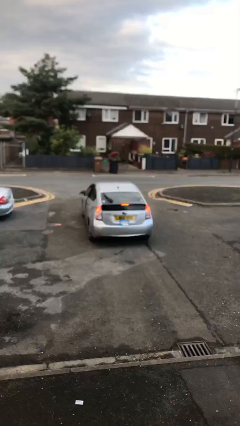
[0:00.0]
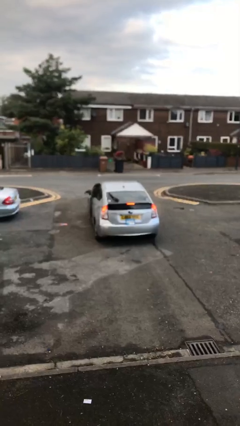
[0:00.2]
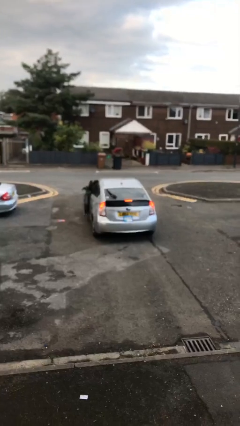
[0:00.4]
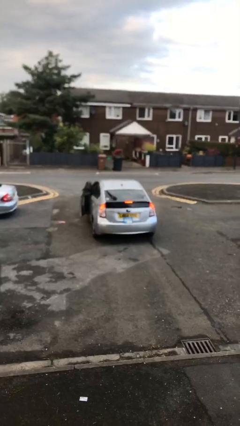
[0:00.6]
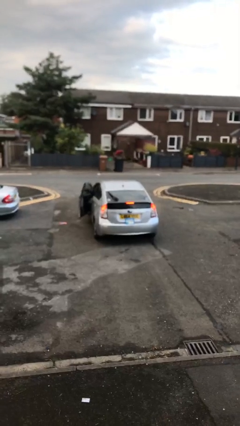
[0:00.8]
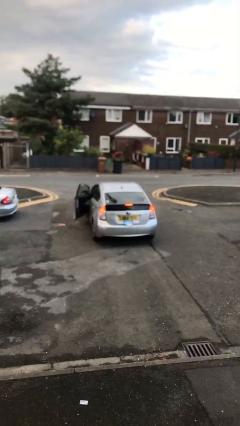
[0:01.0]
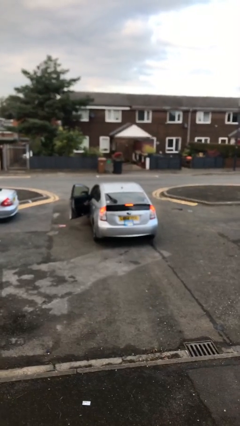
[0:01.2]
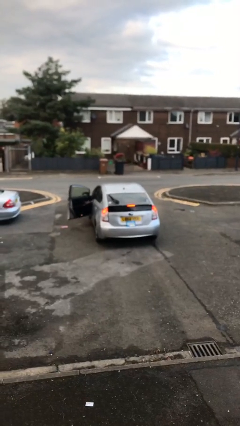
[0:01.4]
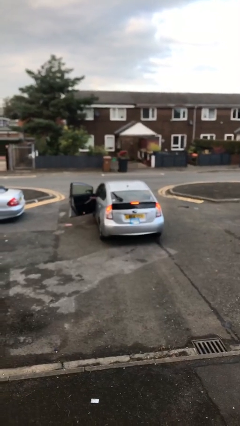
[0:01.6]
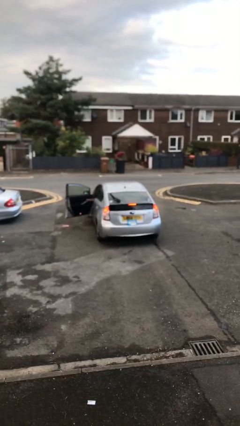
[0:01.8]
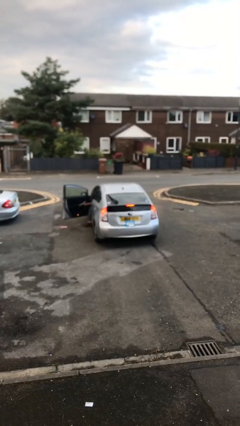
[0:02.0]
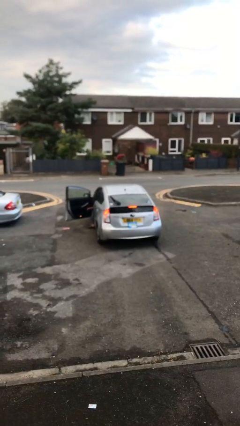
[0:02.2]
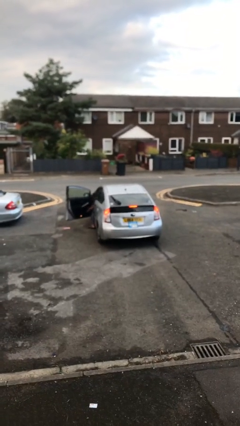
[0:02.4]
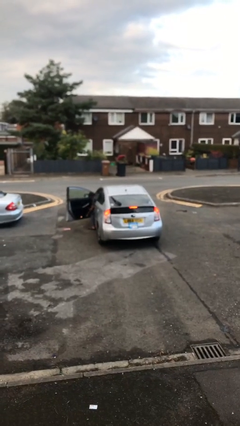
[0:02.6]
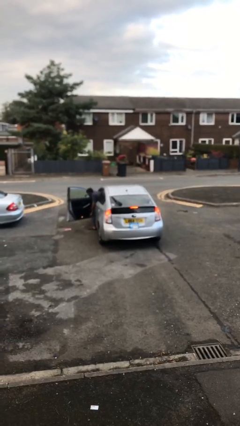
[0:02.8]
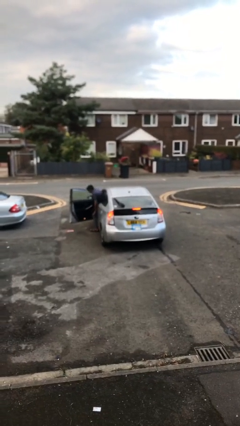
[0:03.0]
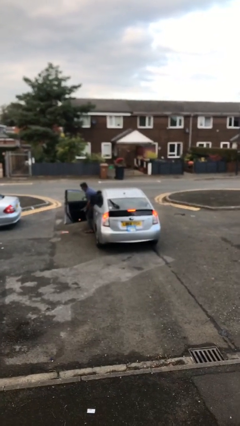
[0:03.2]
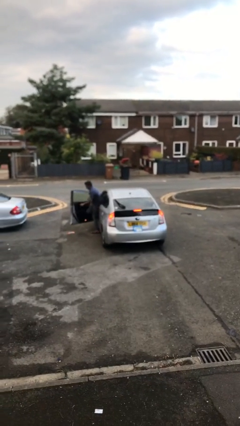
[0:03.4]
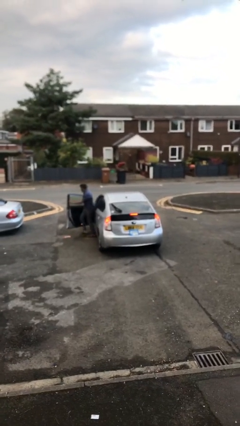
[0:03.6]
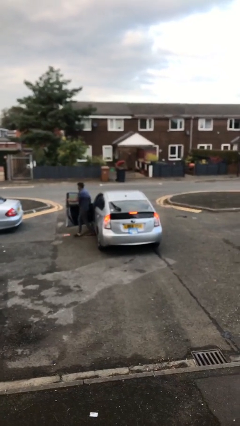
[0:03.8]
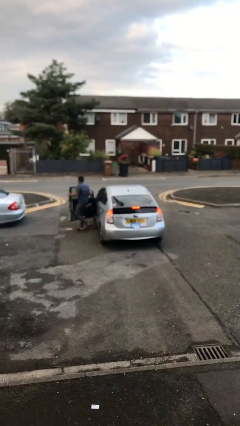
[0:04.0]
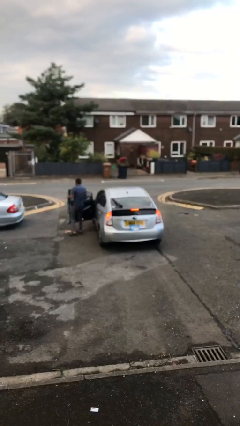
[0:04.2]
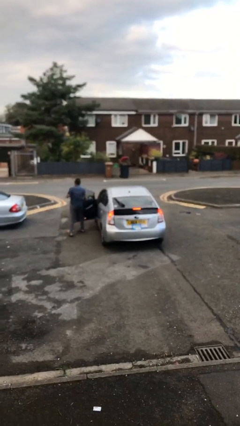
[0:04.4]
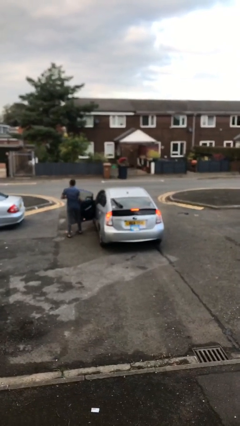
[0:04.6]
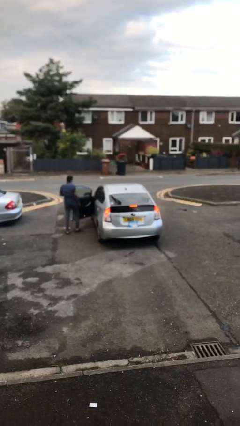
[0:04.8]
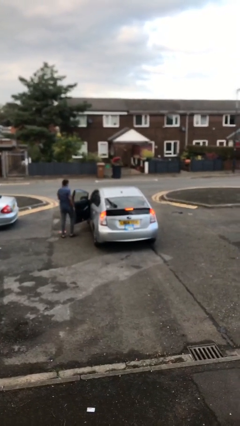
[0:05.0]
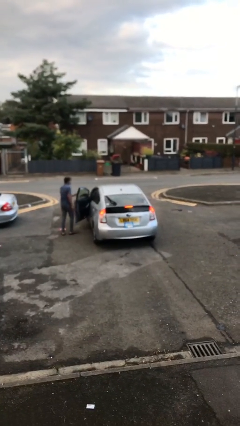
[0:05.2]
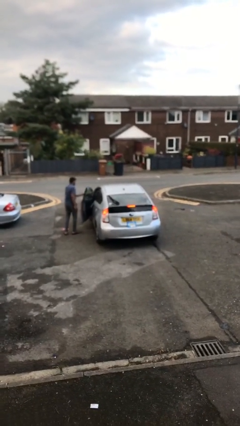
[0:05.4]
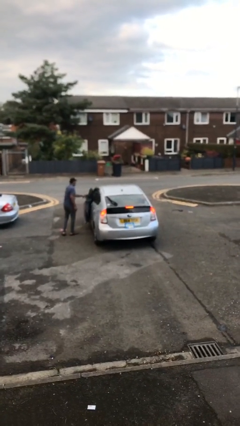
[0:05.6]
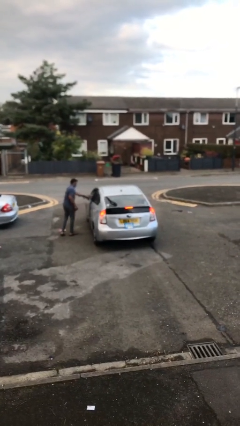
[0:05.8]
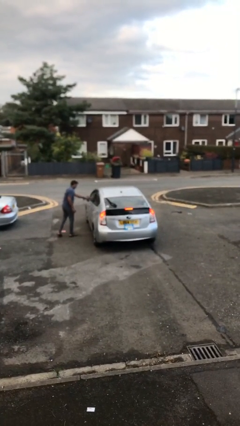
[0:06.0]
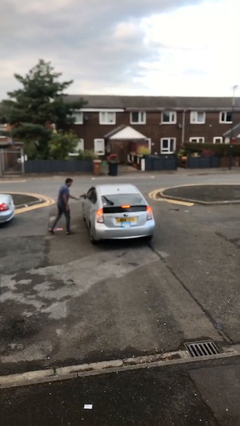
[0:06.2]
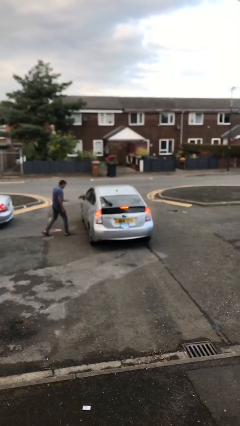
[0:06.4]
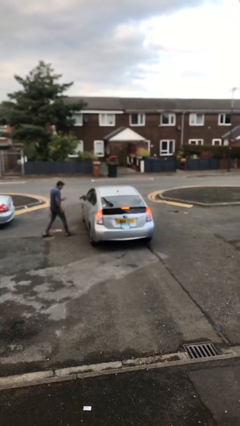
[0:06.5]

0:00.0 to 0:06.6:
car drops off person

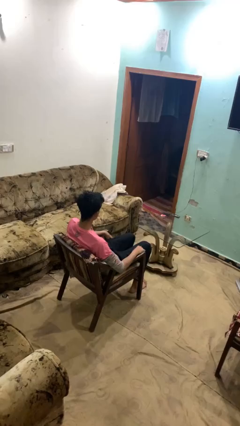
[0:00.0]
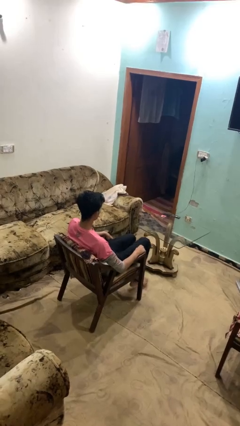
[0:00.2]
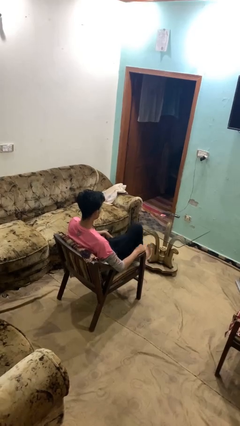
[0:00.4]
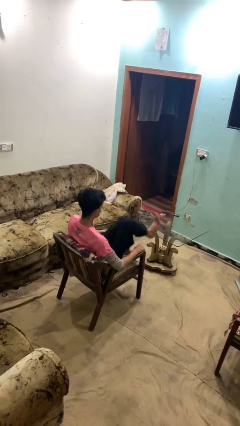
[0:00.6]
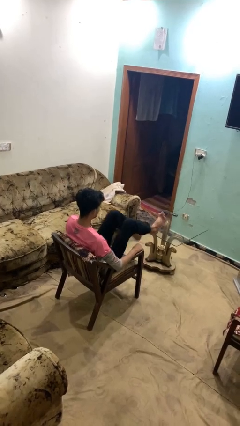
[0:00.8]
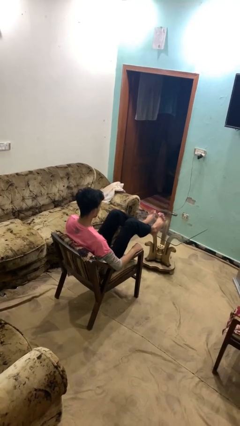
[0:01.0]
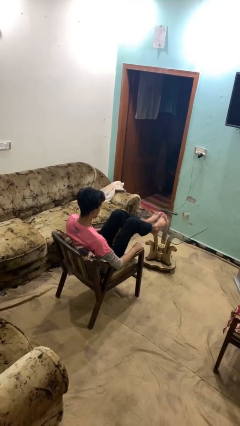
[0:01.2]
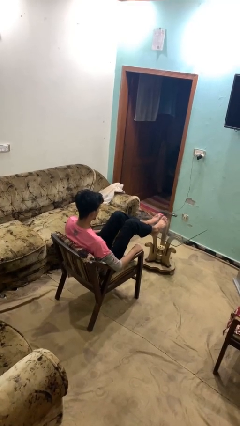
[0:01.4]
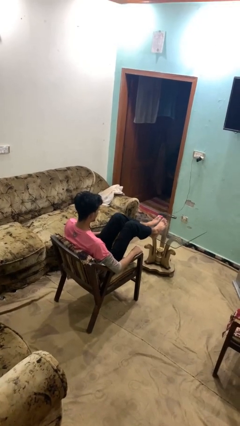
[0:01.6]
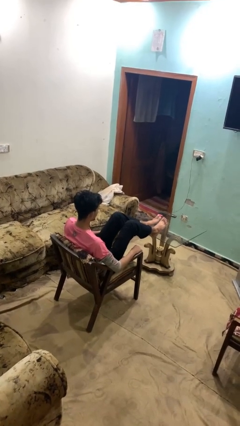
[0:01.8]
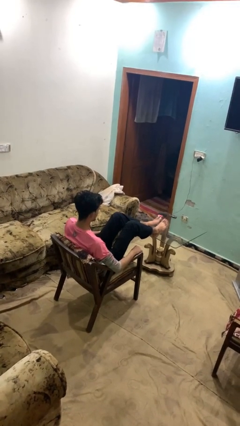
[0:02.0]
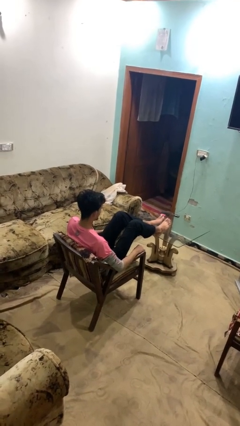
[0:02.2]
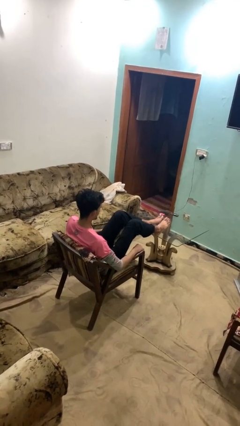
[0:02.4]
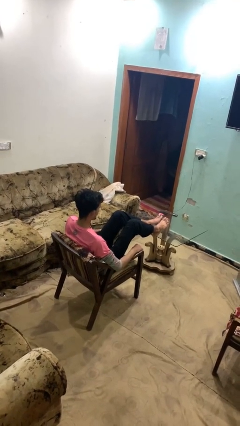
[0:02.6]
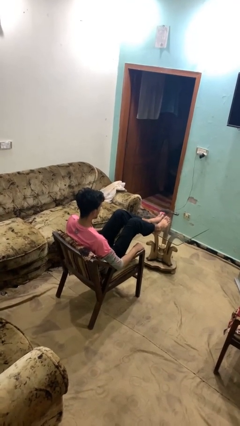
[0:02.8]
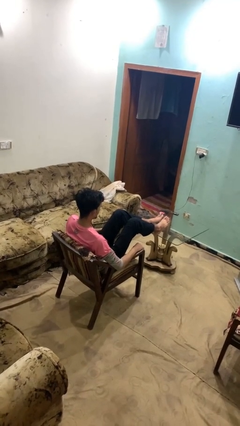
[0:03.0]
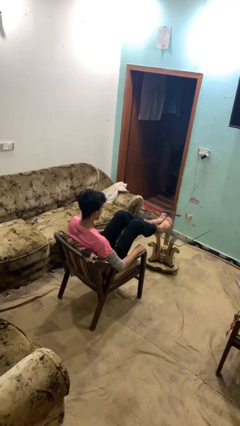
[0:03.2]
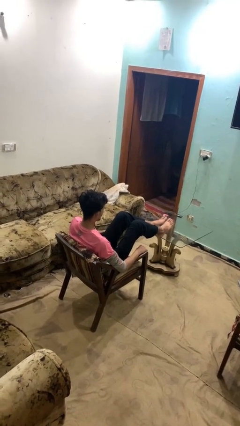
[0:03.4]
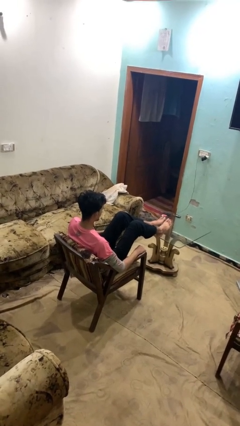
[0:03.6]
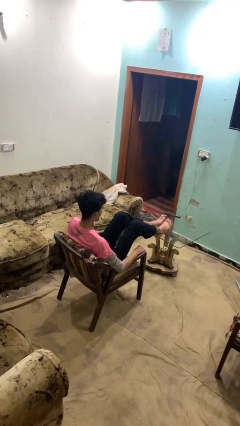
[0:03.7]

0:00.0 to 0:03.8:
person puts feet up

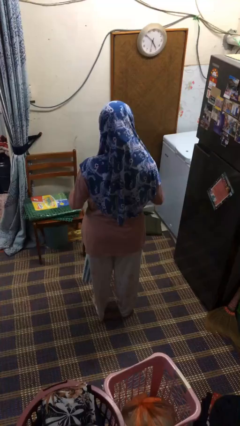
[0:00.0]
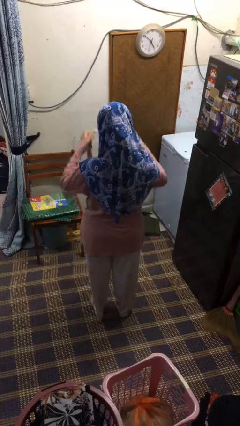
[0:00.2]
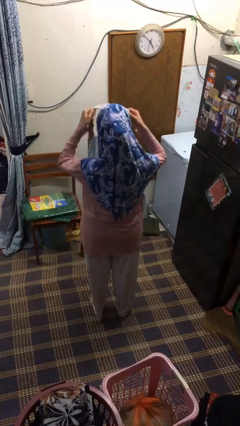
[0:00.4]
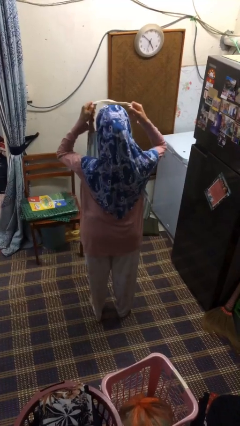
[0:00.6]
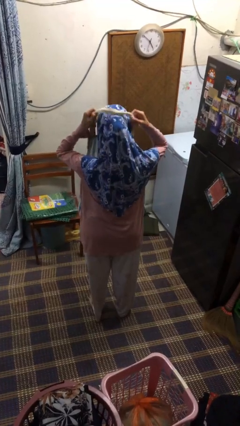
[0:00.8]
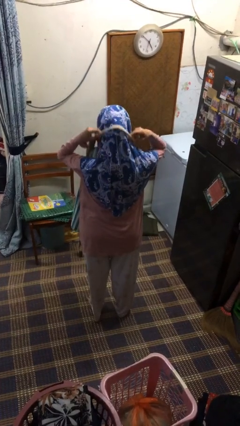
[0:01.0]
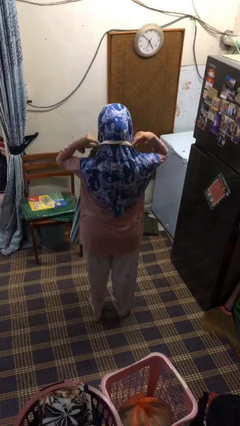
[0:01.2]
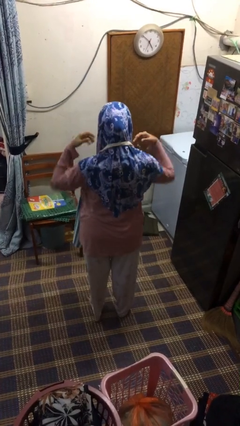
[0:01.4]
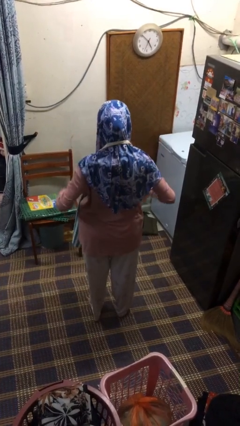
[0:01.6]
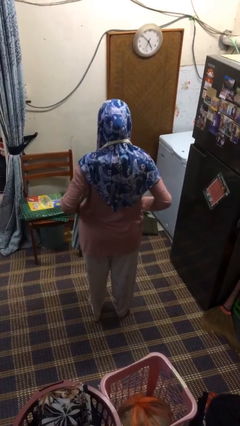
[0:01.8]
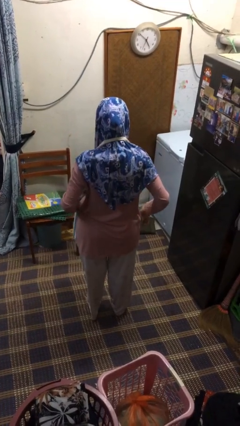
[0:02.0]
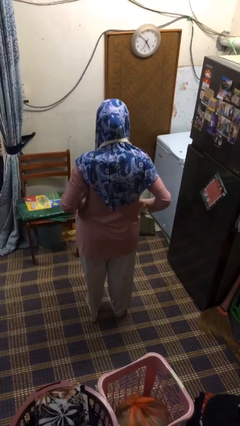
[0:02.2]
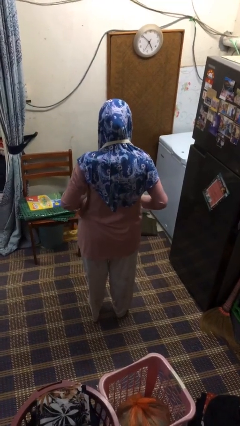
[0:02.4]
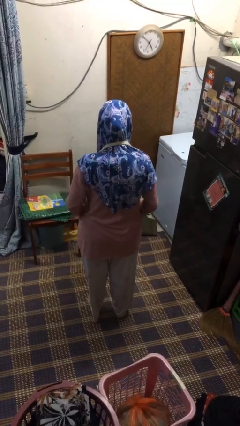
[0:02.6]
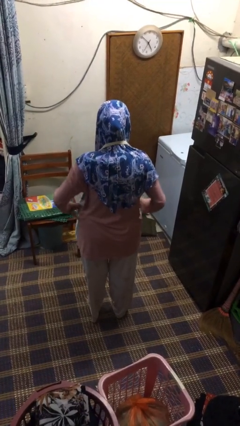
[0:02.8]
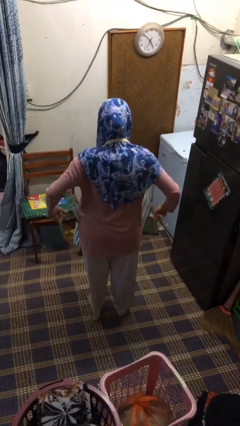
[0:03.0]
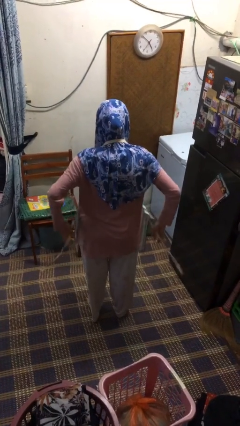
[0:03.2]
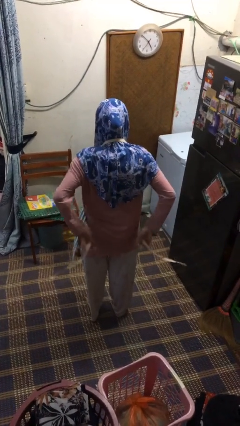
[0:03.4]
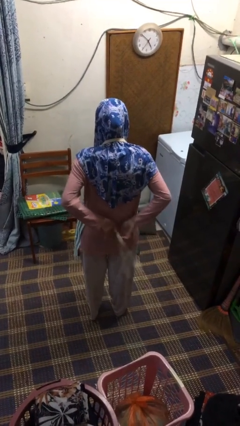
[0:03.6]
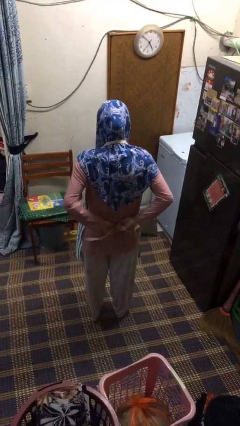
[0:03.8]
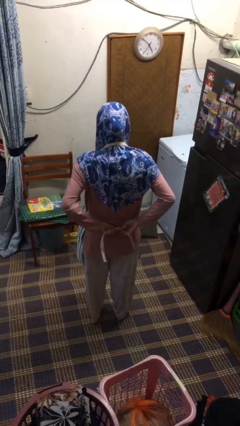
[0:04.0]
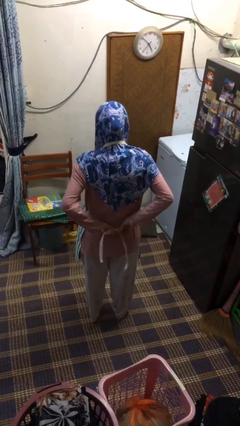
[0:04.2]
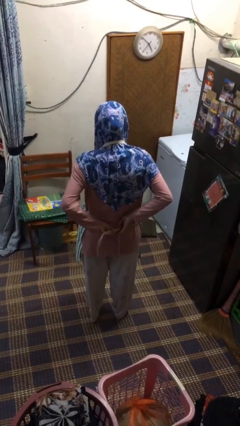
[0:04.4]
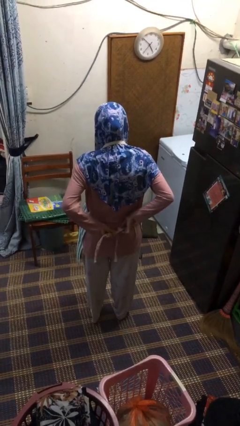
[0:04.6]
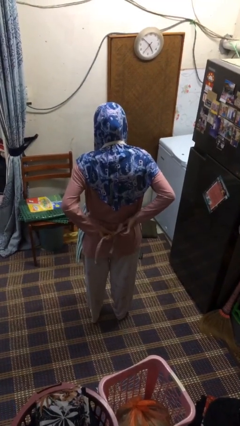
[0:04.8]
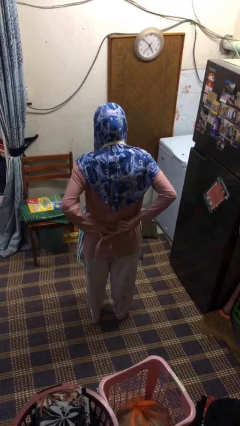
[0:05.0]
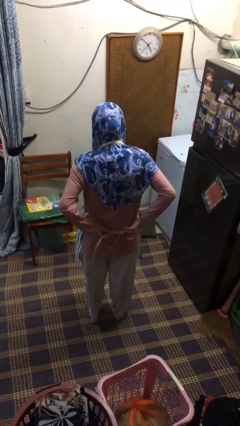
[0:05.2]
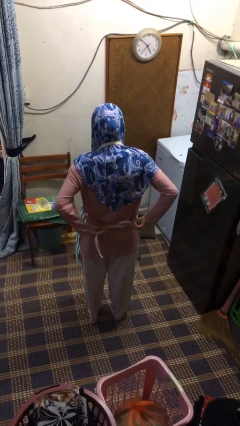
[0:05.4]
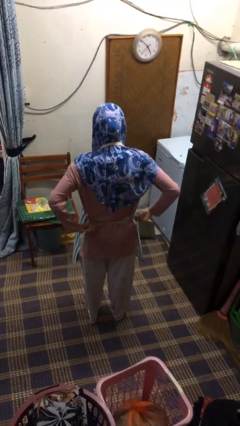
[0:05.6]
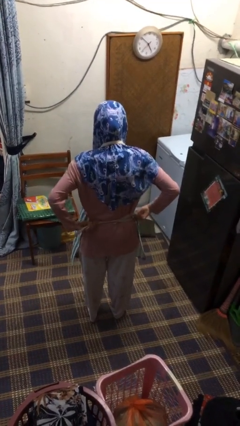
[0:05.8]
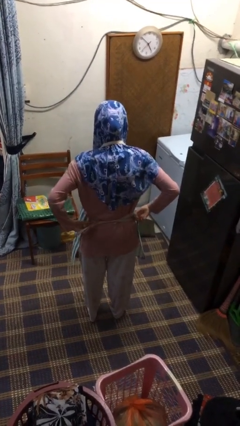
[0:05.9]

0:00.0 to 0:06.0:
person puts on apron

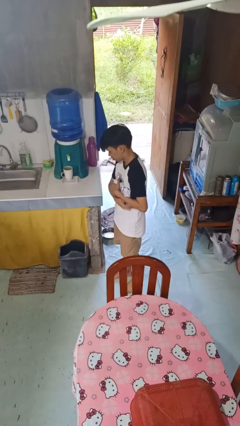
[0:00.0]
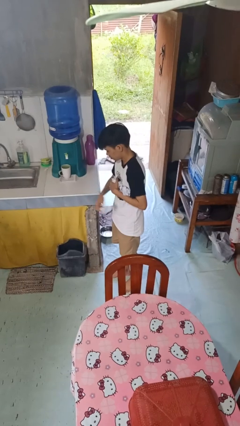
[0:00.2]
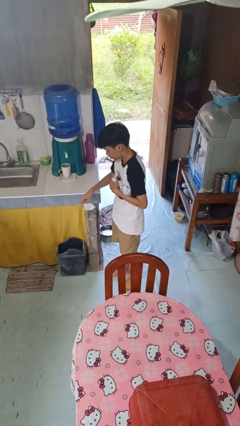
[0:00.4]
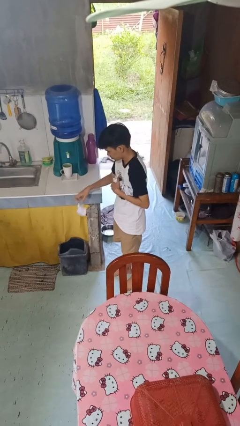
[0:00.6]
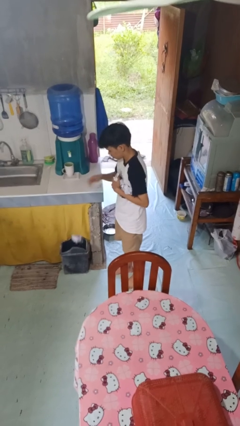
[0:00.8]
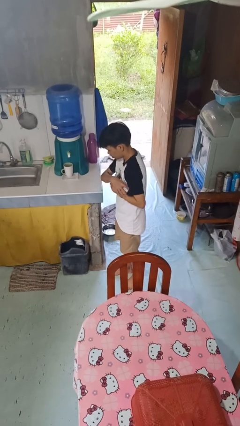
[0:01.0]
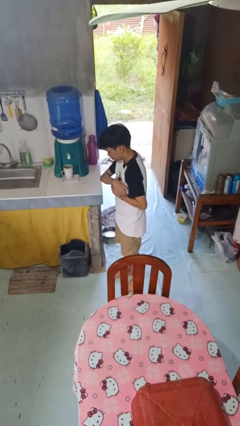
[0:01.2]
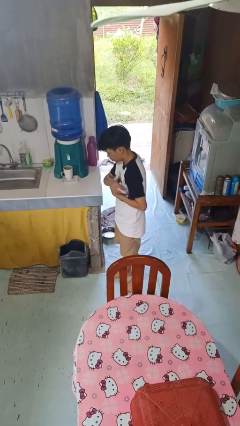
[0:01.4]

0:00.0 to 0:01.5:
person discards trash
